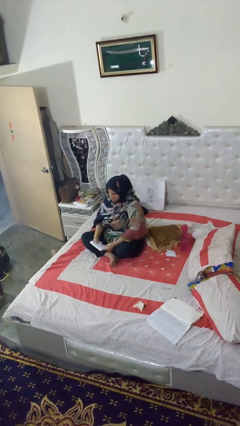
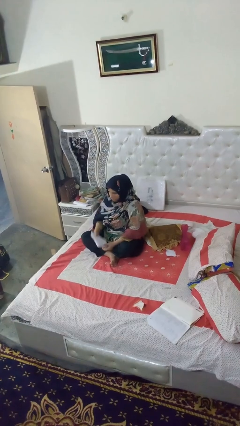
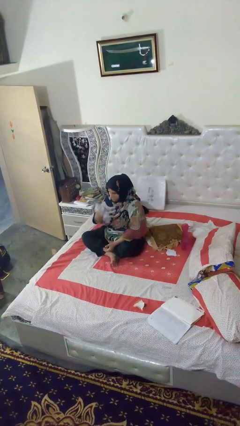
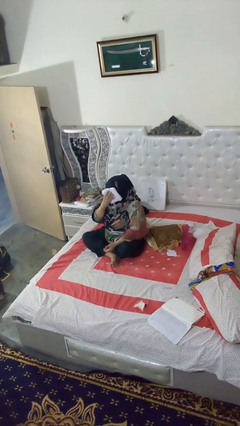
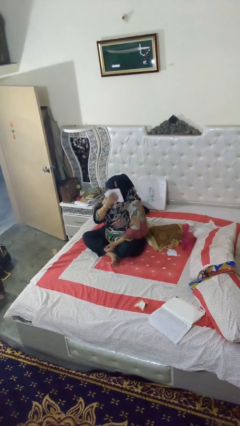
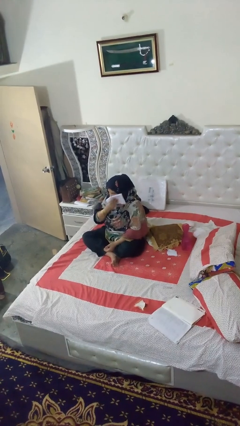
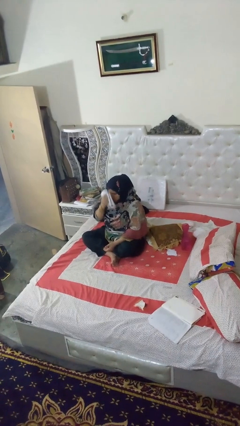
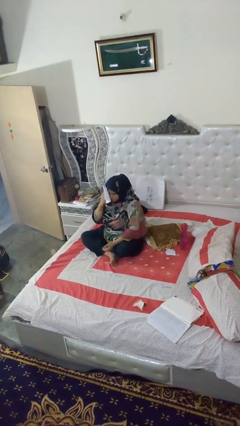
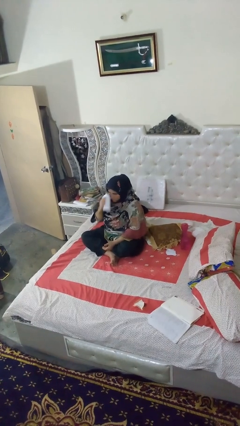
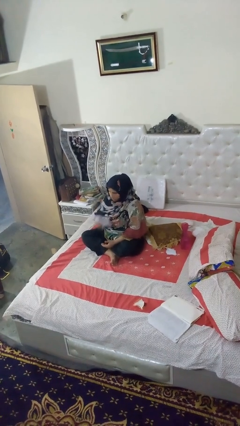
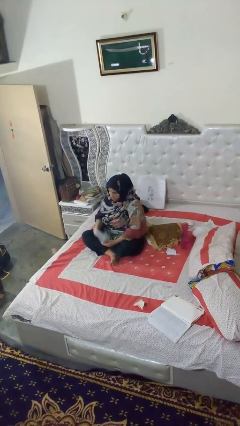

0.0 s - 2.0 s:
person wipes mouth with napkin

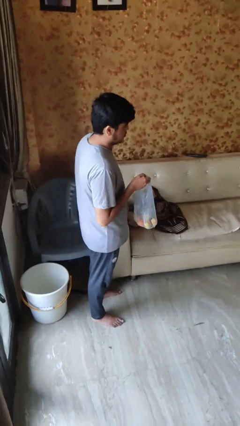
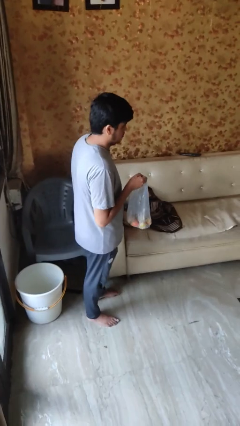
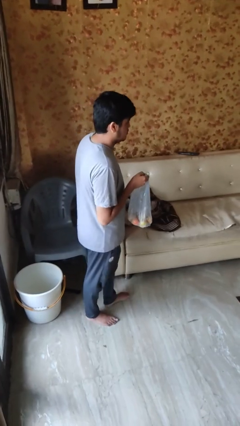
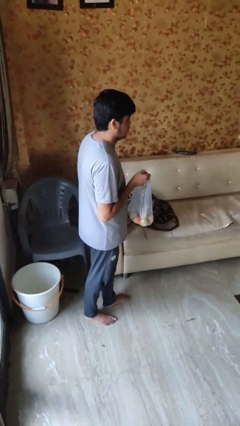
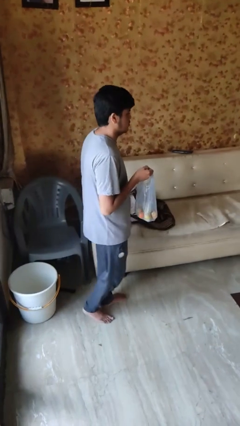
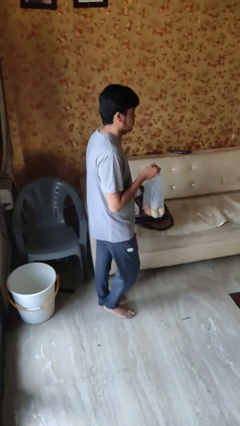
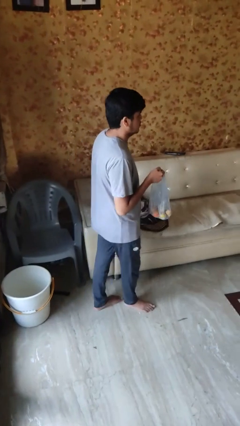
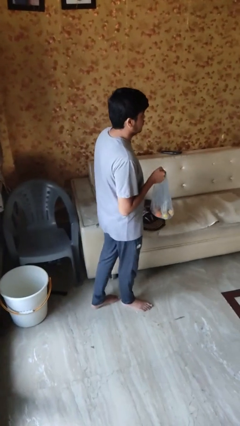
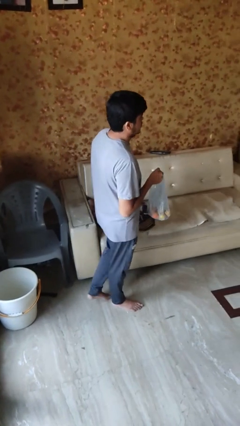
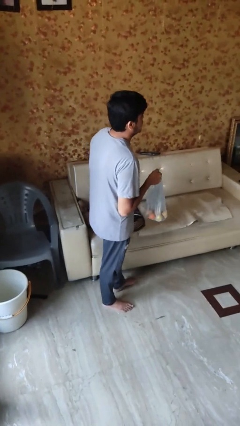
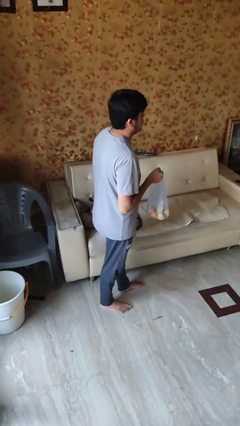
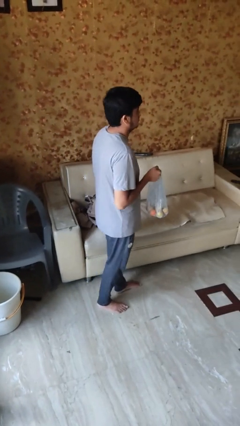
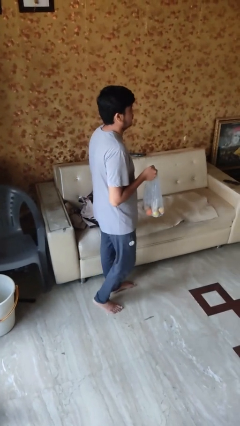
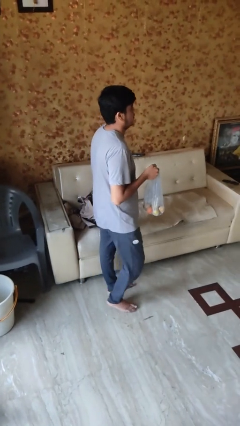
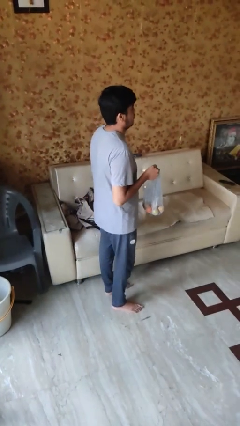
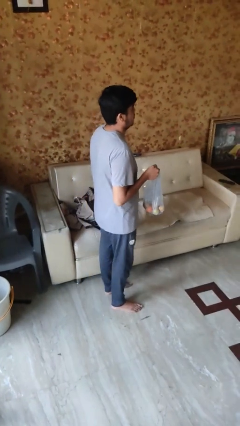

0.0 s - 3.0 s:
person carries groceries

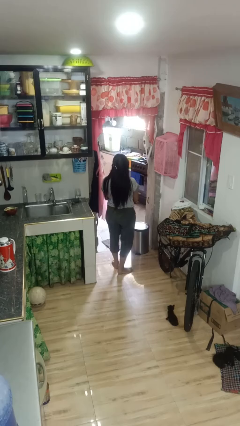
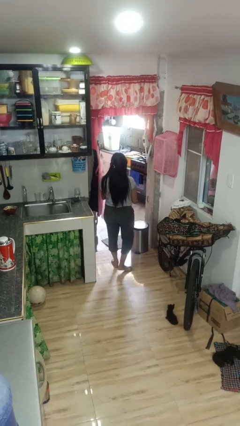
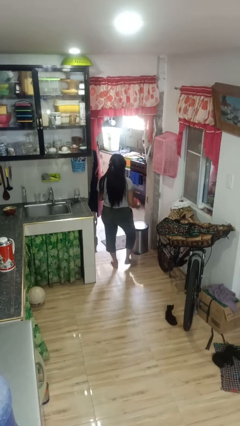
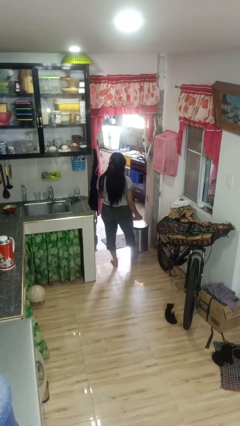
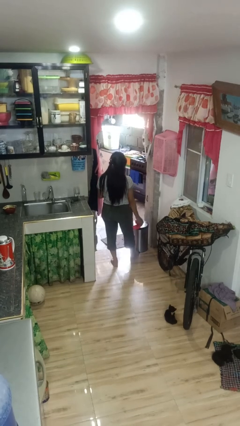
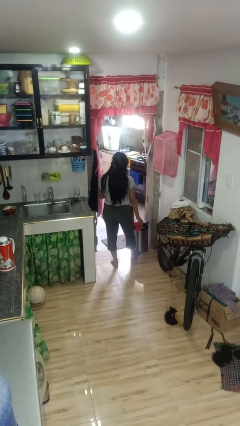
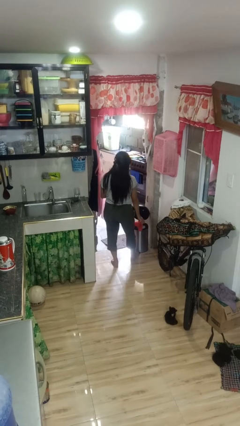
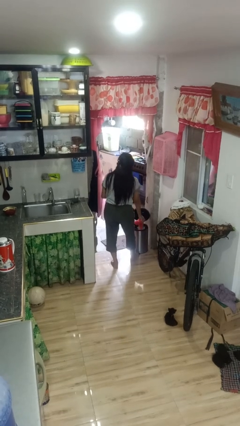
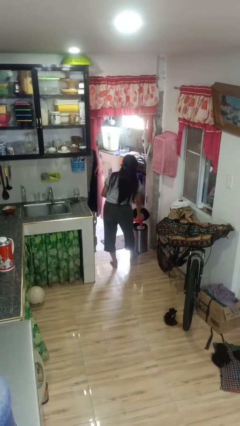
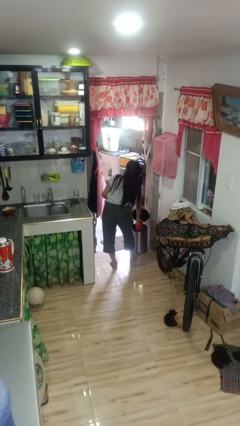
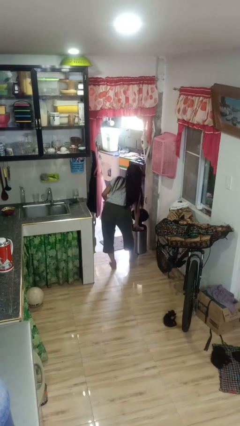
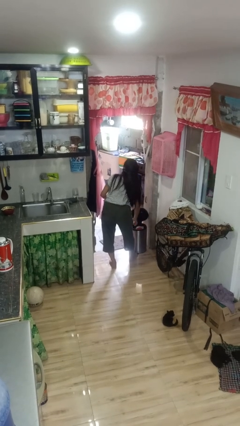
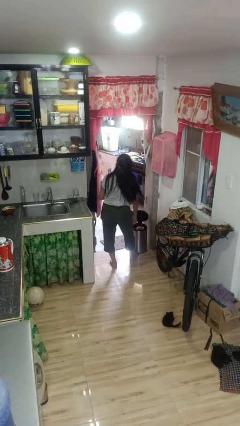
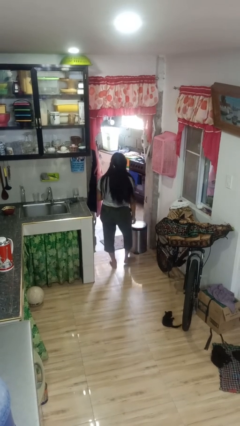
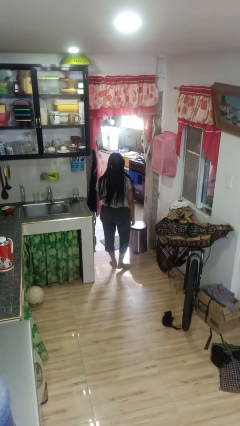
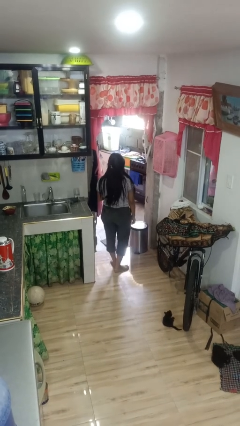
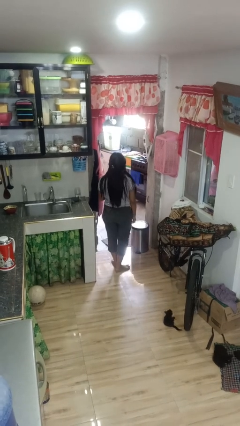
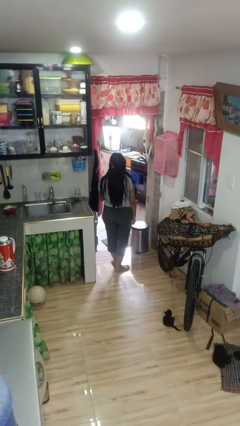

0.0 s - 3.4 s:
person discards trash

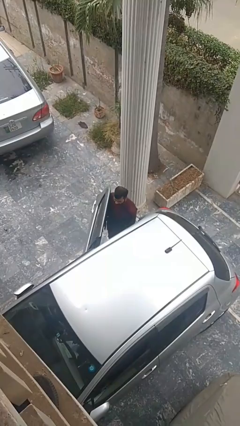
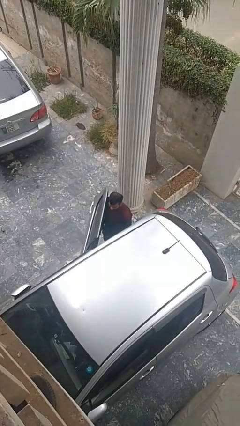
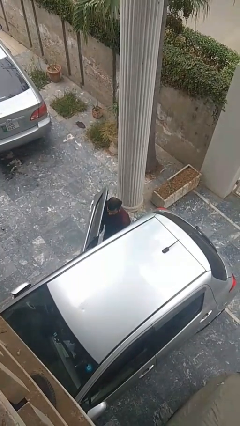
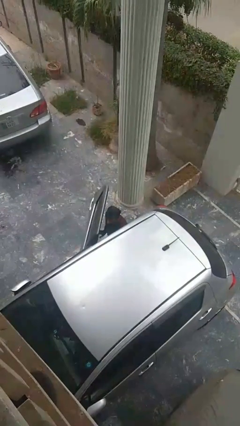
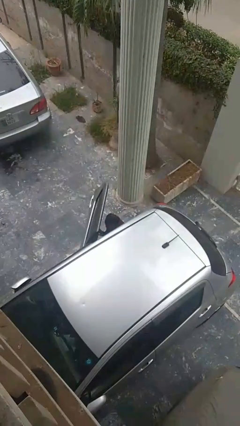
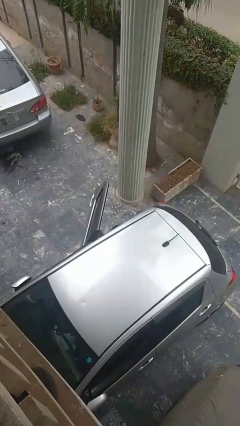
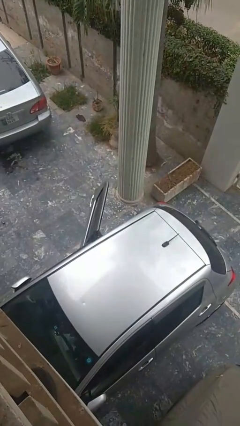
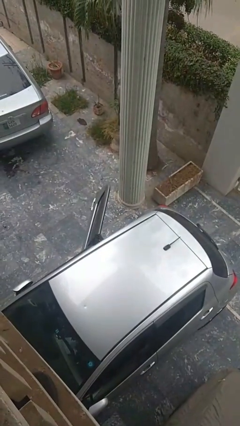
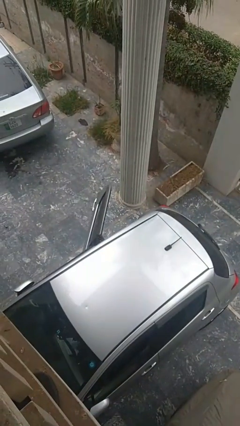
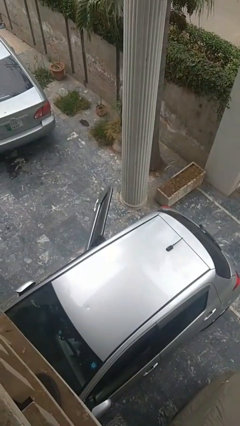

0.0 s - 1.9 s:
person enters car

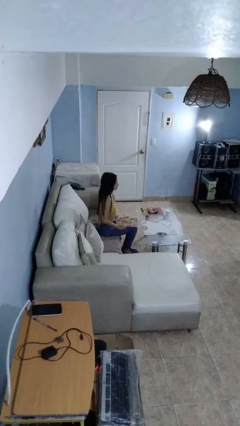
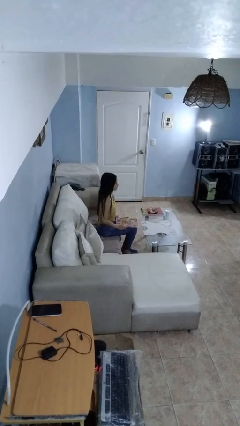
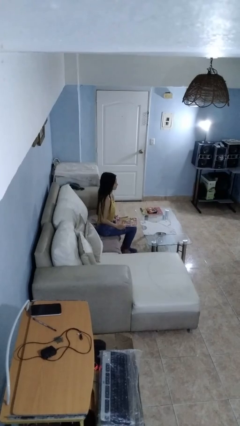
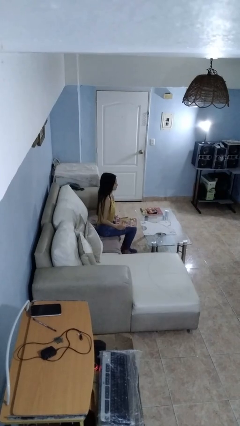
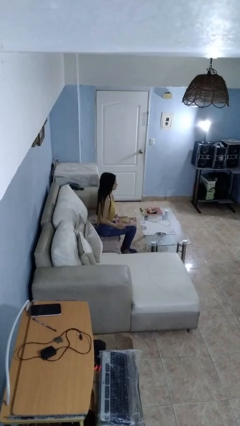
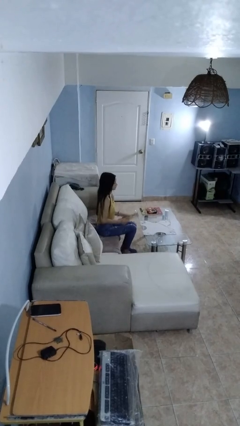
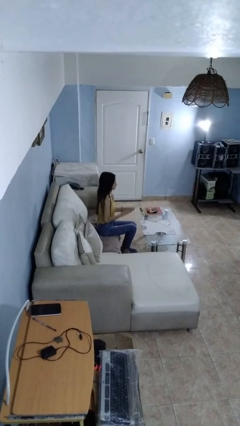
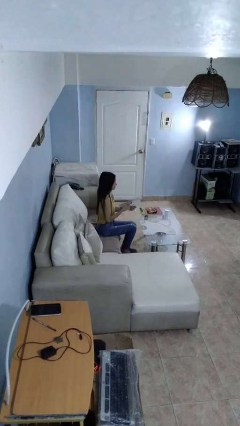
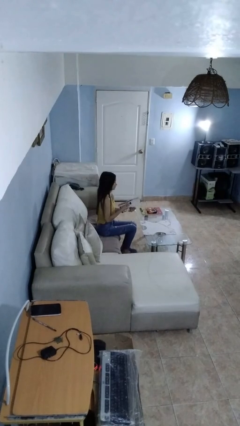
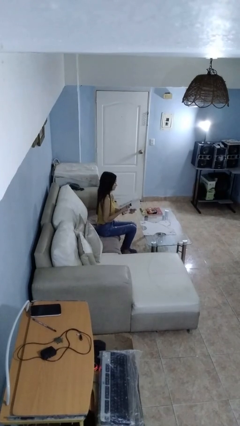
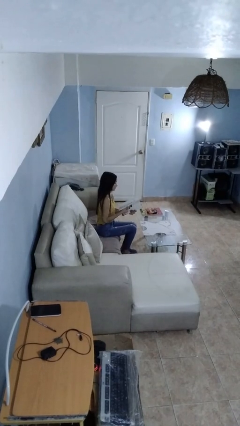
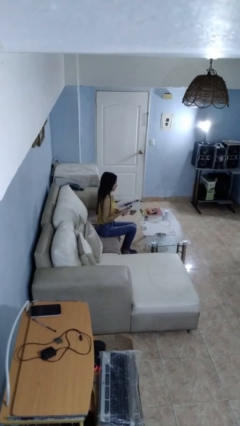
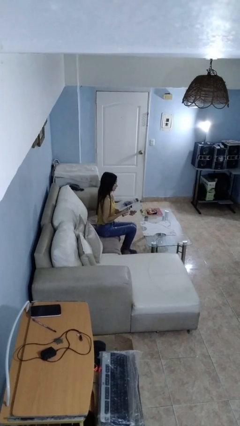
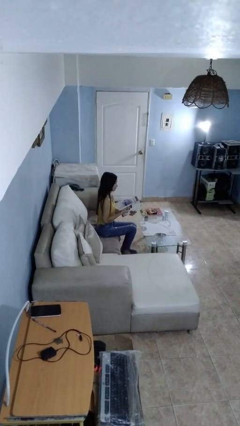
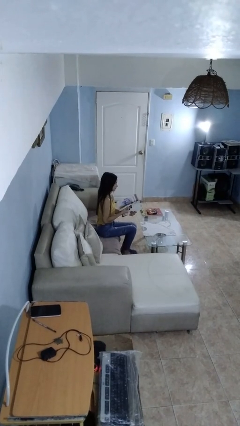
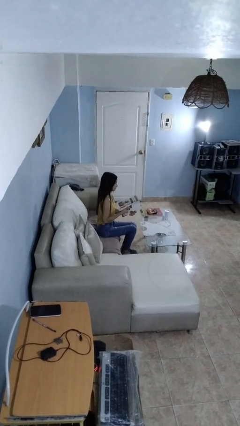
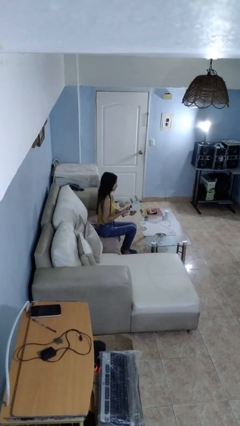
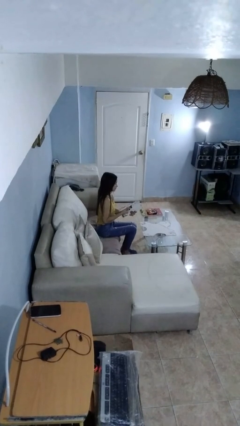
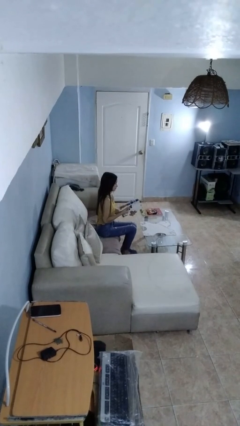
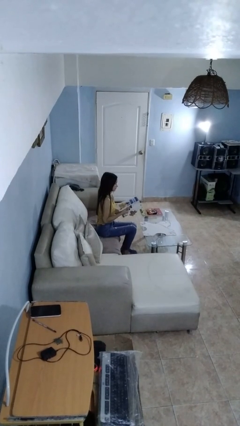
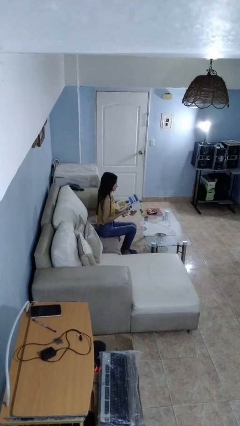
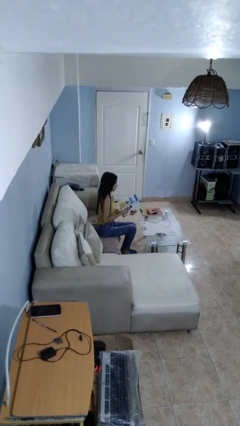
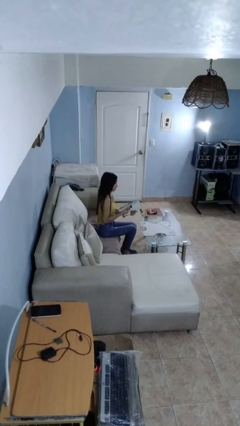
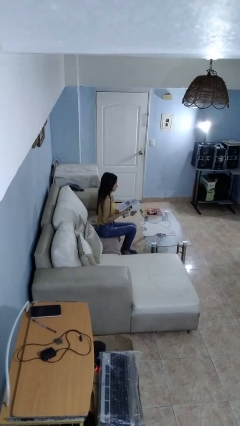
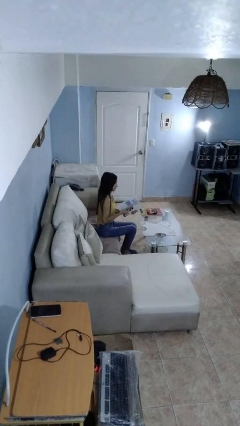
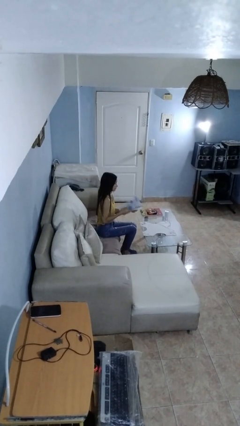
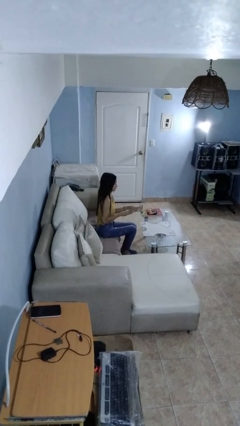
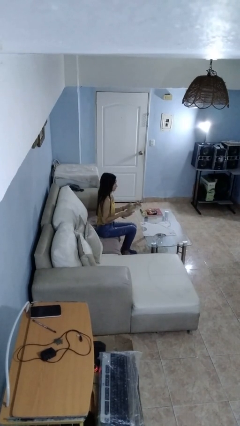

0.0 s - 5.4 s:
person reads magazine

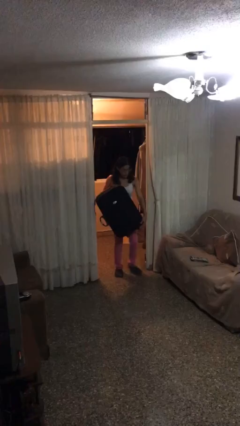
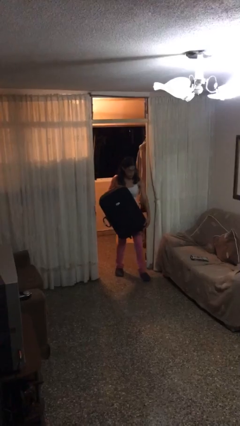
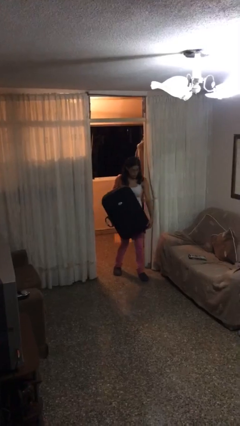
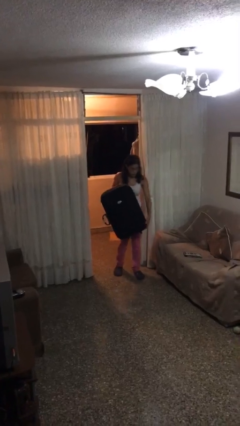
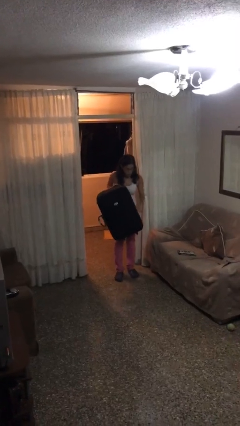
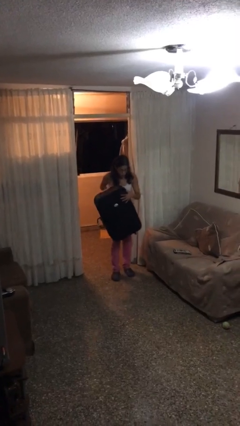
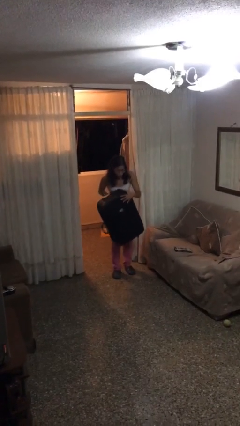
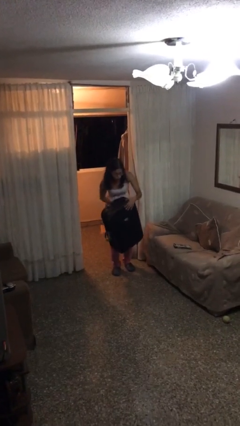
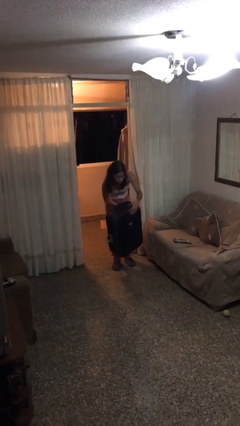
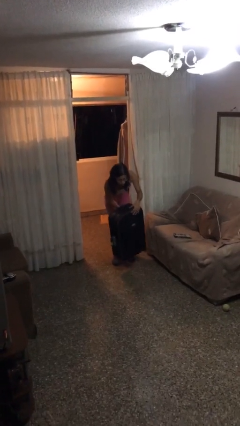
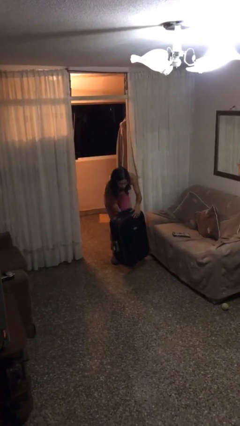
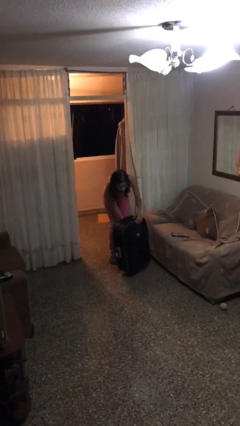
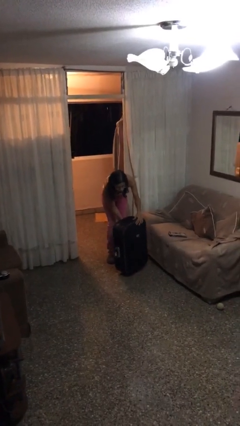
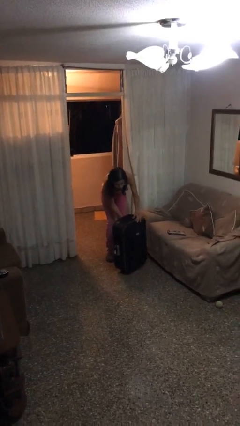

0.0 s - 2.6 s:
person puts down object on floor
